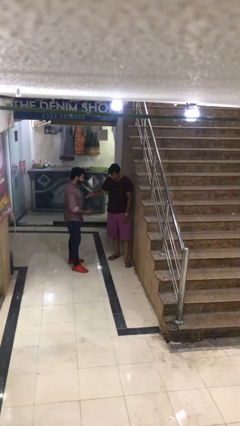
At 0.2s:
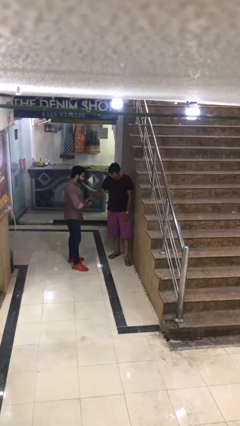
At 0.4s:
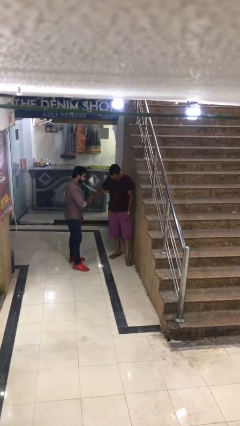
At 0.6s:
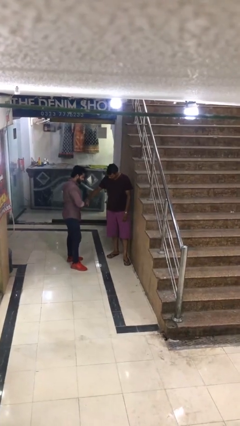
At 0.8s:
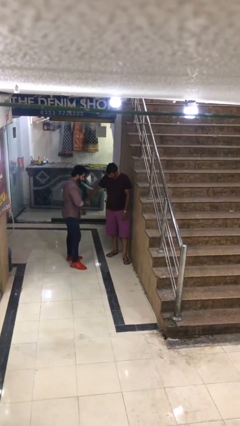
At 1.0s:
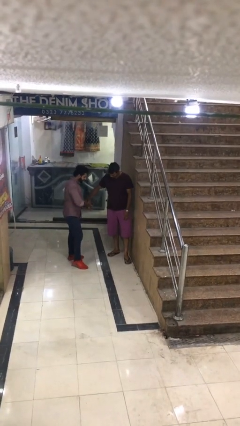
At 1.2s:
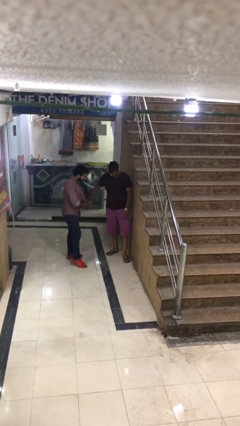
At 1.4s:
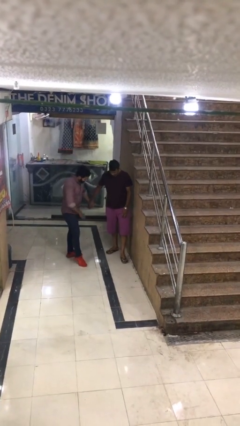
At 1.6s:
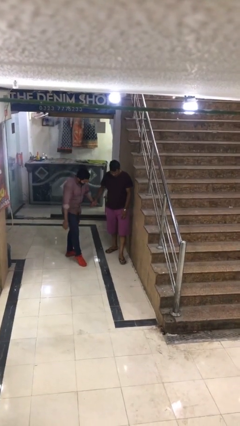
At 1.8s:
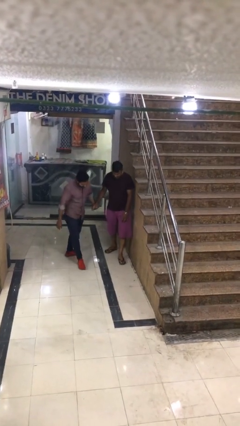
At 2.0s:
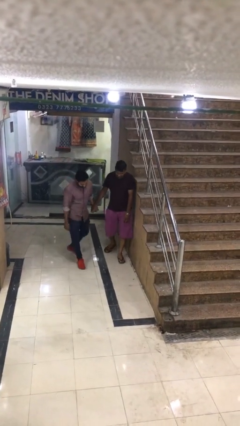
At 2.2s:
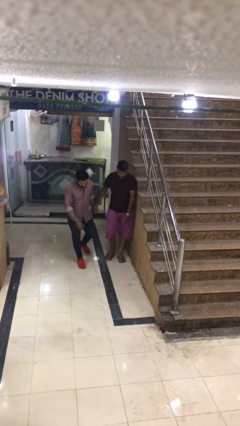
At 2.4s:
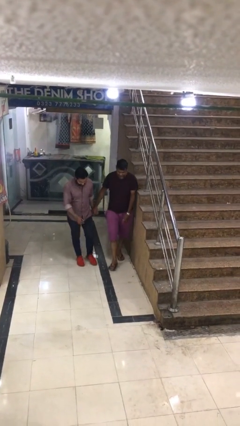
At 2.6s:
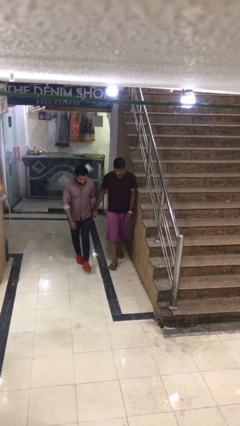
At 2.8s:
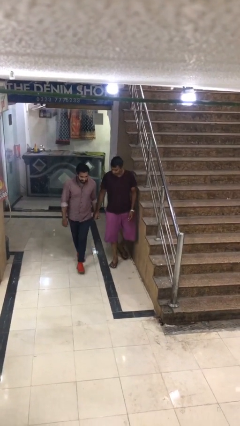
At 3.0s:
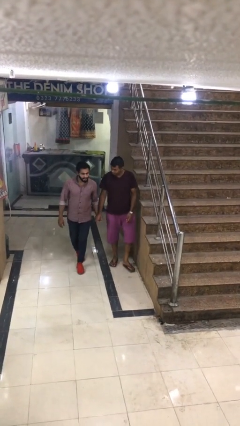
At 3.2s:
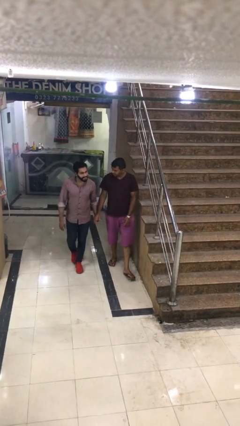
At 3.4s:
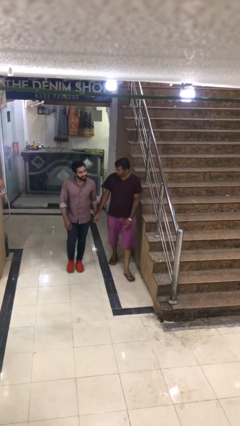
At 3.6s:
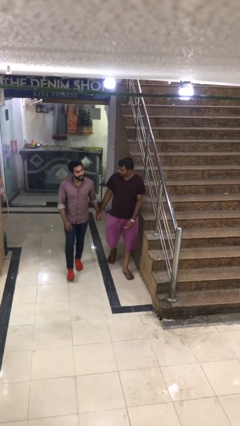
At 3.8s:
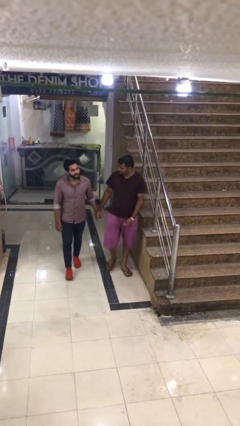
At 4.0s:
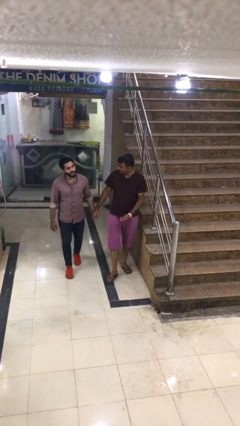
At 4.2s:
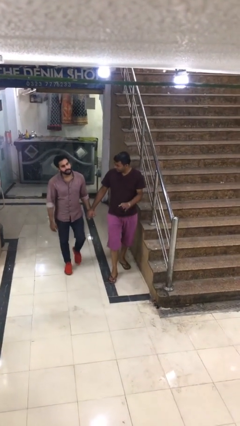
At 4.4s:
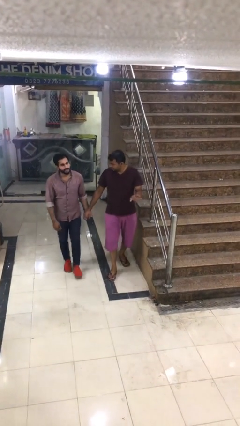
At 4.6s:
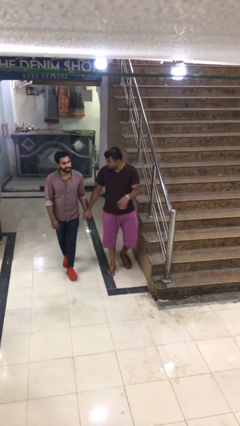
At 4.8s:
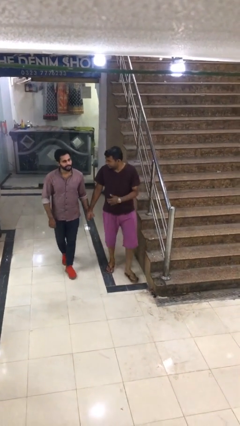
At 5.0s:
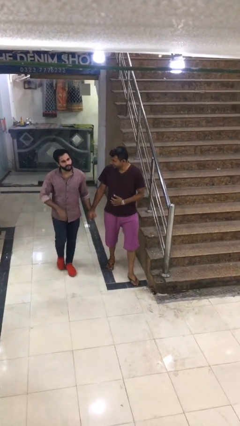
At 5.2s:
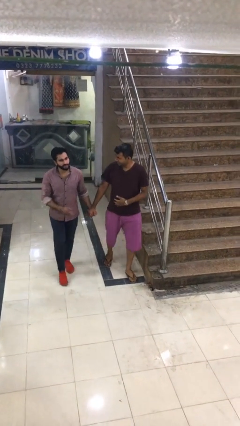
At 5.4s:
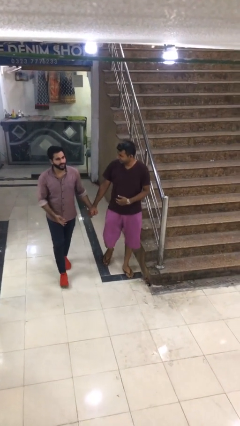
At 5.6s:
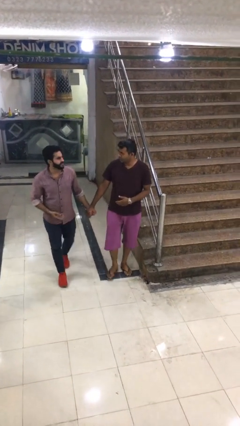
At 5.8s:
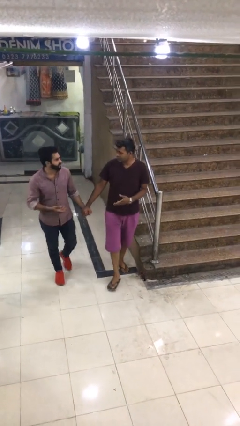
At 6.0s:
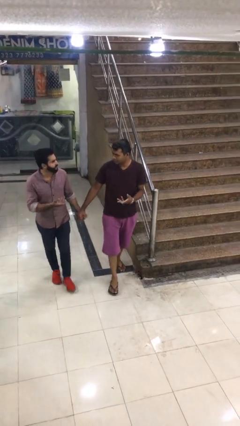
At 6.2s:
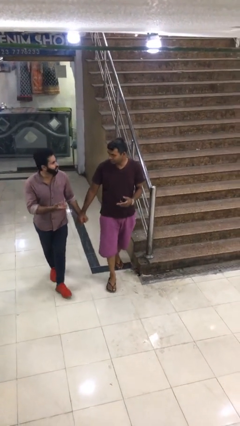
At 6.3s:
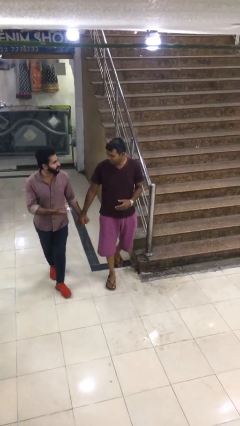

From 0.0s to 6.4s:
person holds hand

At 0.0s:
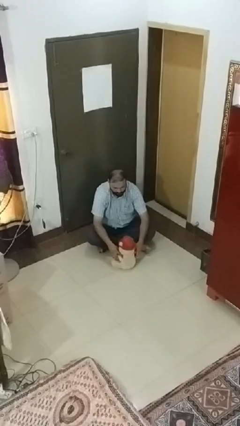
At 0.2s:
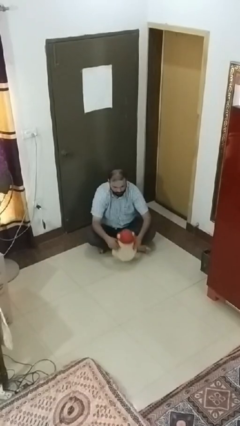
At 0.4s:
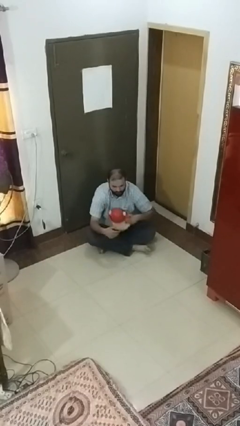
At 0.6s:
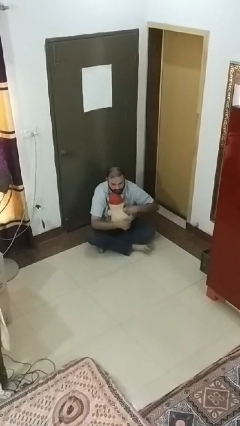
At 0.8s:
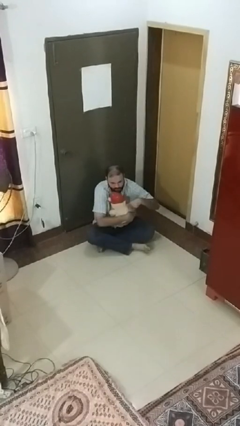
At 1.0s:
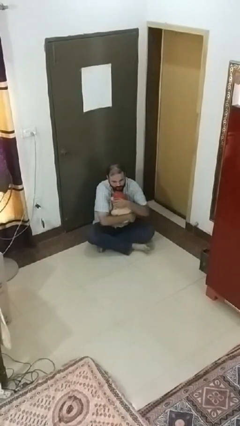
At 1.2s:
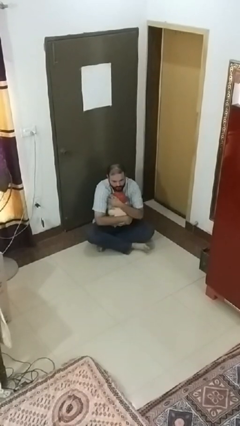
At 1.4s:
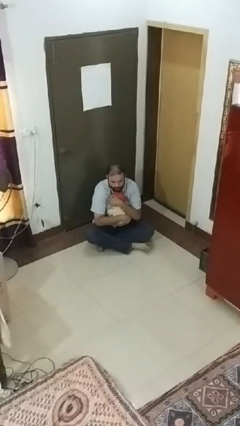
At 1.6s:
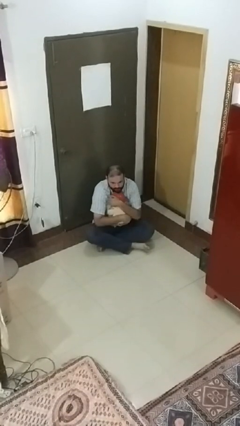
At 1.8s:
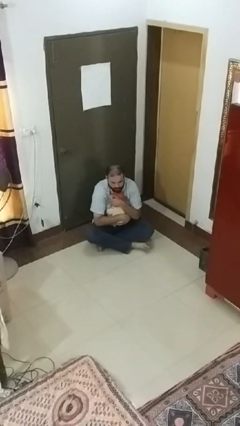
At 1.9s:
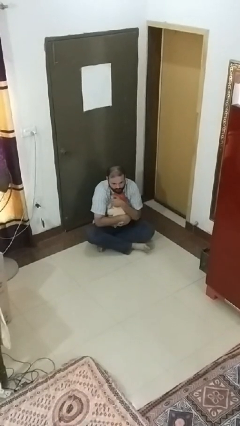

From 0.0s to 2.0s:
person hugs stuffed animal

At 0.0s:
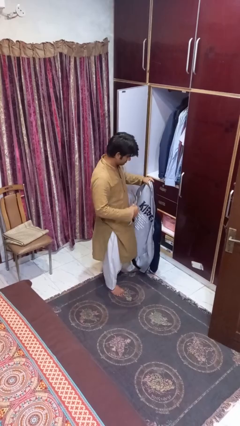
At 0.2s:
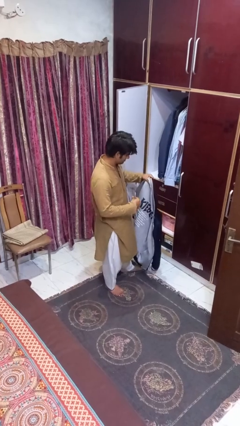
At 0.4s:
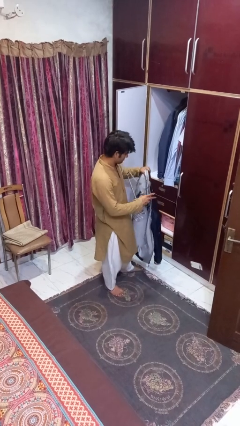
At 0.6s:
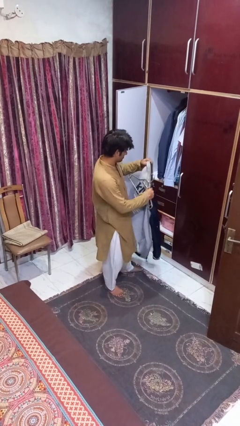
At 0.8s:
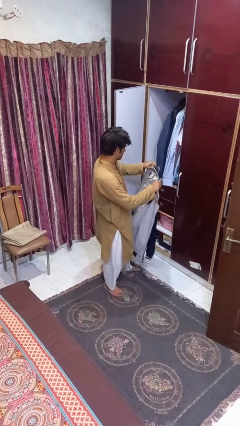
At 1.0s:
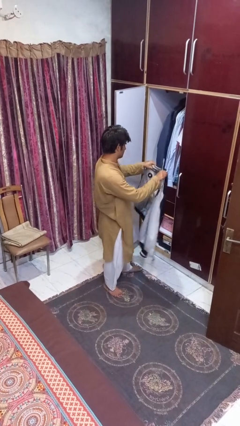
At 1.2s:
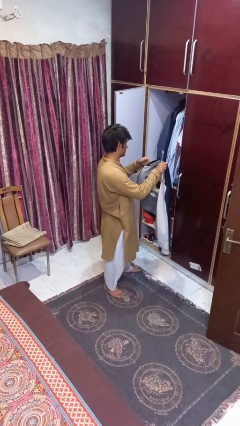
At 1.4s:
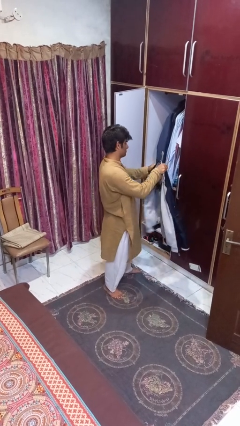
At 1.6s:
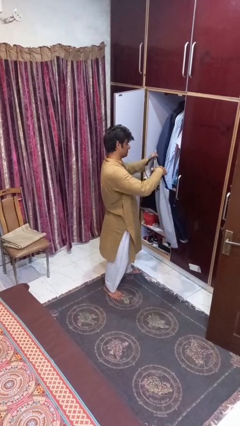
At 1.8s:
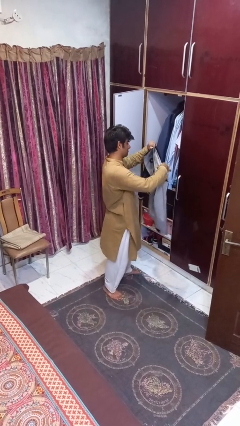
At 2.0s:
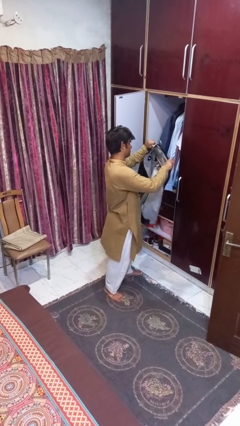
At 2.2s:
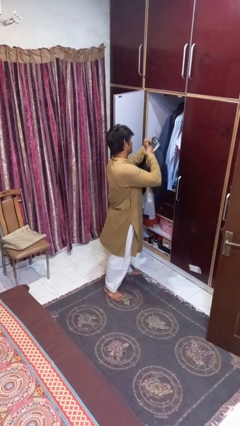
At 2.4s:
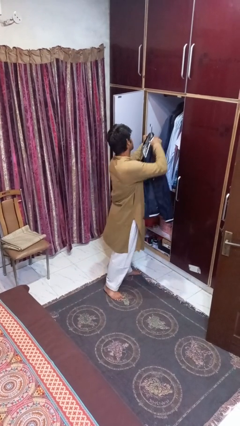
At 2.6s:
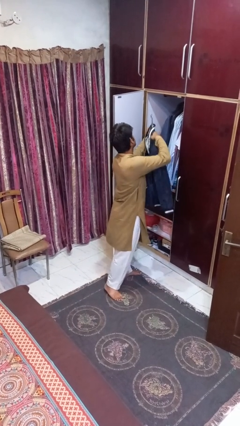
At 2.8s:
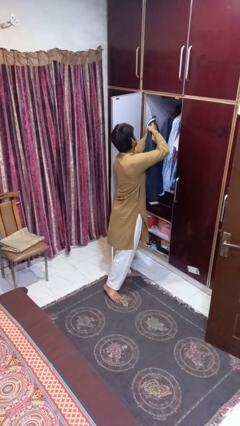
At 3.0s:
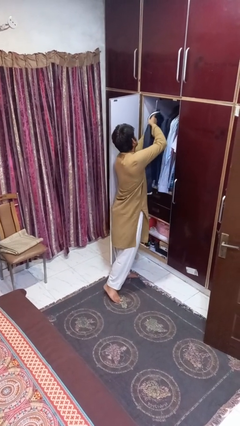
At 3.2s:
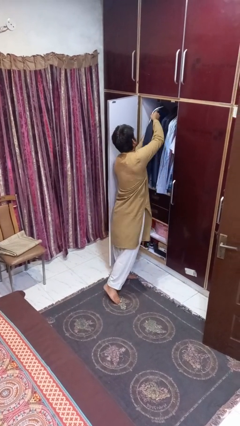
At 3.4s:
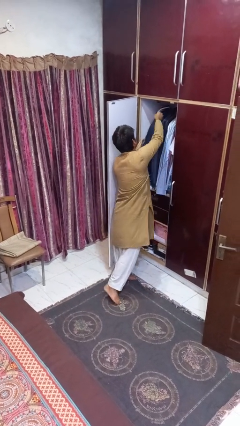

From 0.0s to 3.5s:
person puts clothes into closet

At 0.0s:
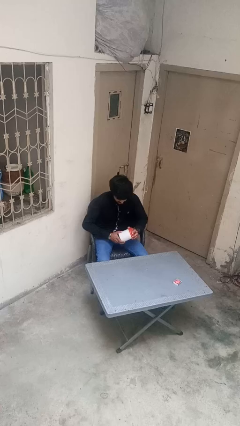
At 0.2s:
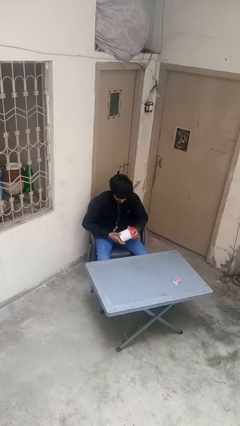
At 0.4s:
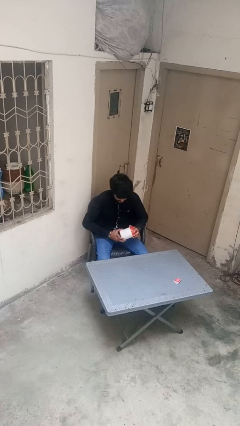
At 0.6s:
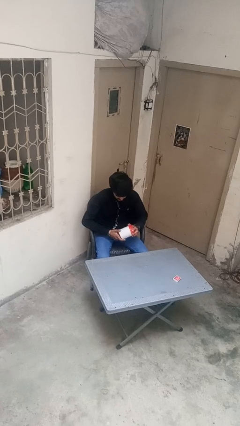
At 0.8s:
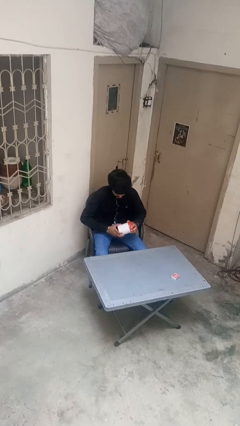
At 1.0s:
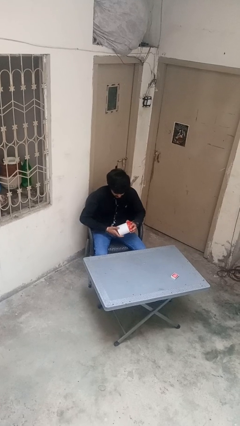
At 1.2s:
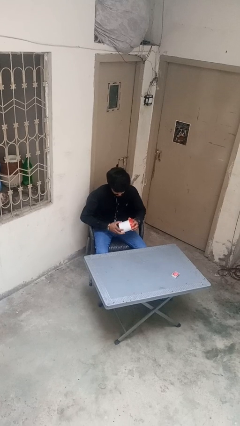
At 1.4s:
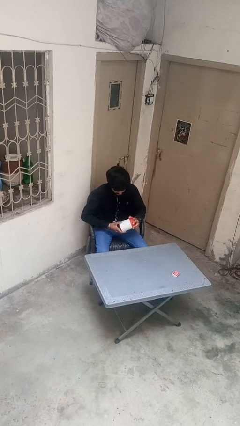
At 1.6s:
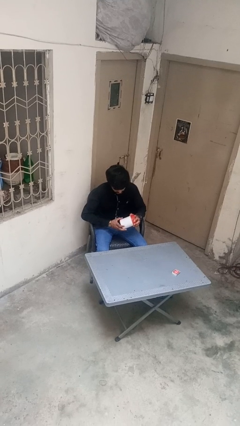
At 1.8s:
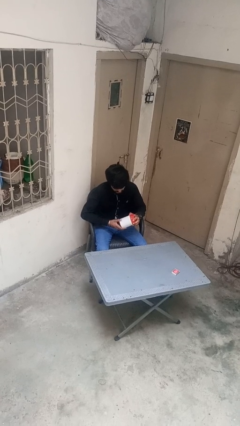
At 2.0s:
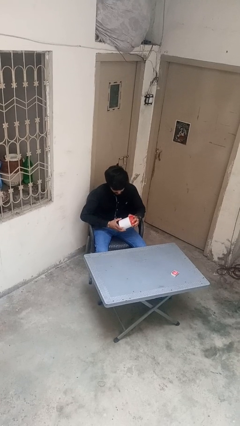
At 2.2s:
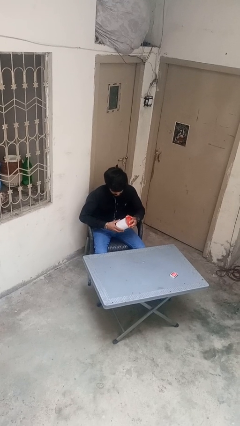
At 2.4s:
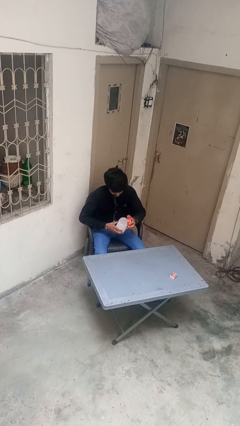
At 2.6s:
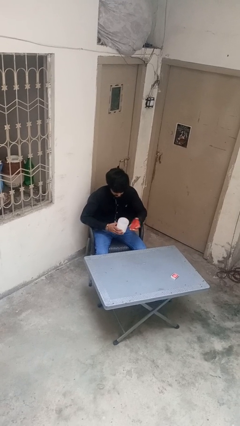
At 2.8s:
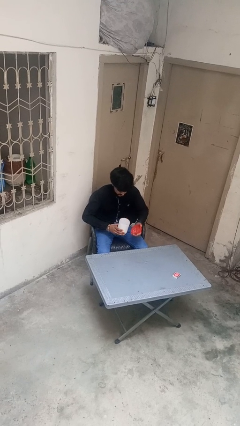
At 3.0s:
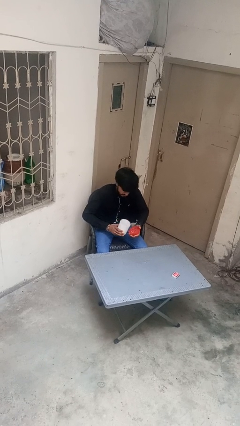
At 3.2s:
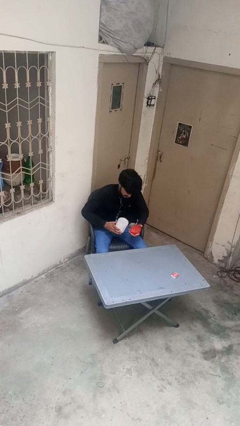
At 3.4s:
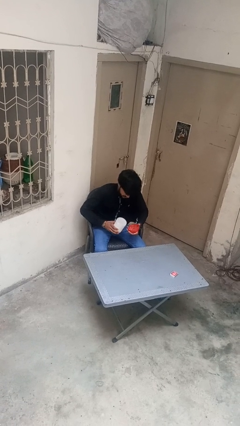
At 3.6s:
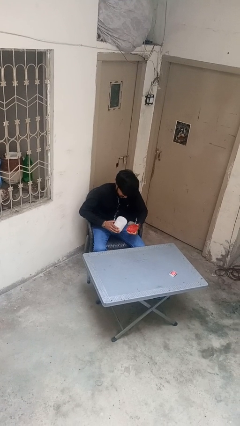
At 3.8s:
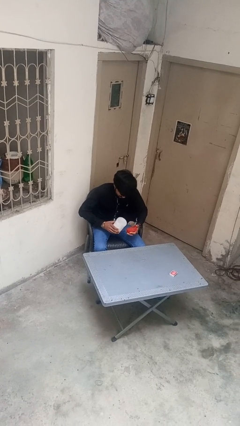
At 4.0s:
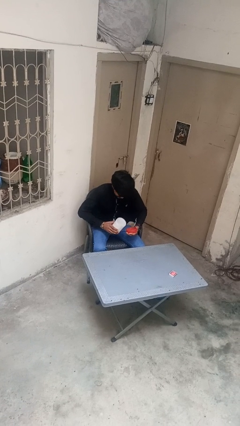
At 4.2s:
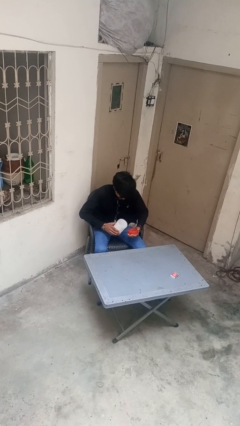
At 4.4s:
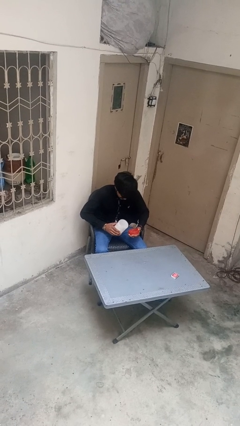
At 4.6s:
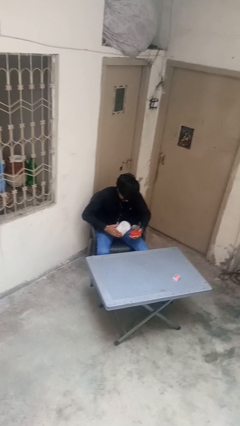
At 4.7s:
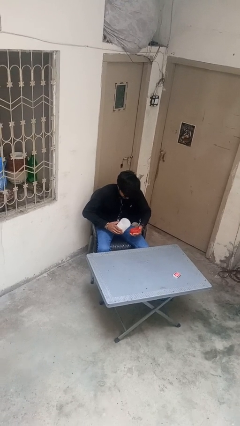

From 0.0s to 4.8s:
person opens jar

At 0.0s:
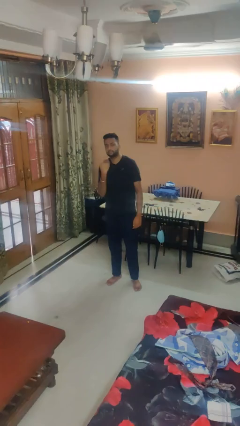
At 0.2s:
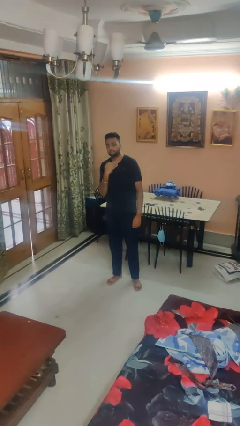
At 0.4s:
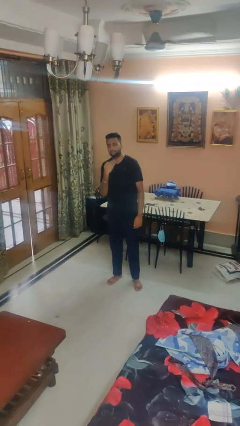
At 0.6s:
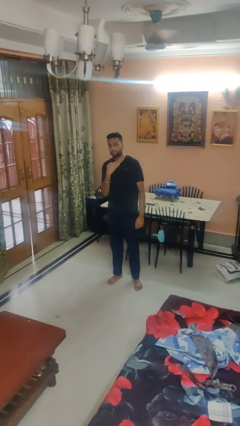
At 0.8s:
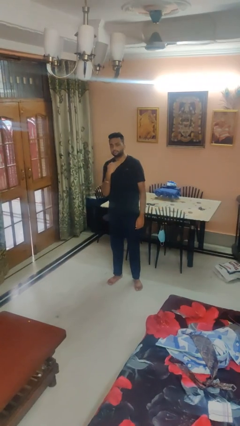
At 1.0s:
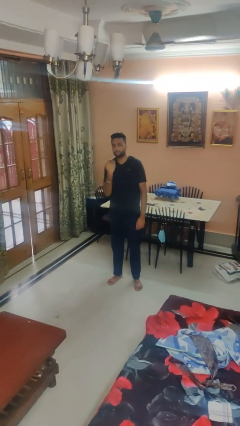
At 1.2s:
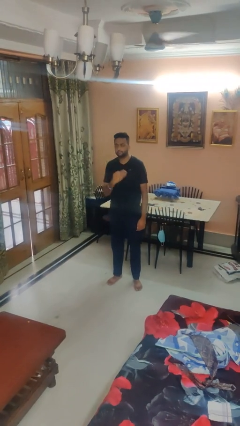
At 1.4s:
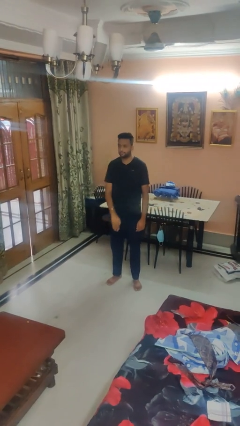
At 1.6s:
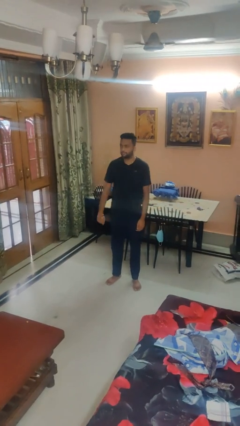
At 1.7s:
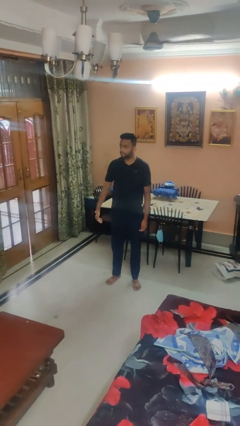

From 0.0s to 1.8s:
person gestures cut
